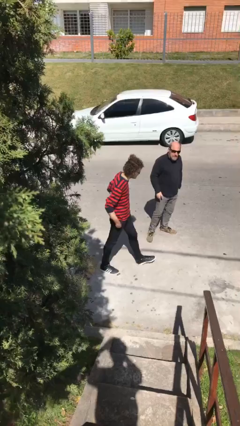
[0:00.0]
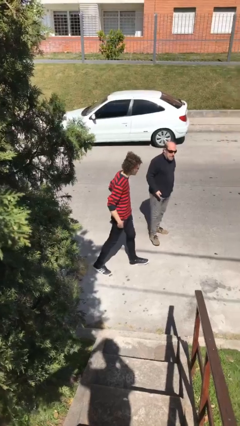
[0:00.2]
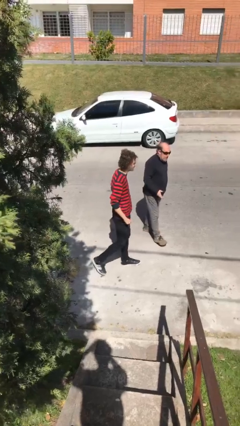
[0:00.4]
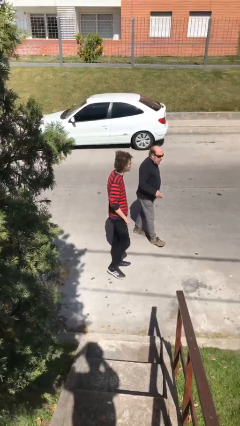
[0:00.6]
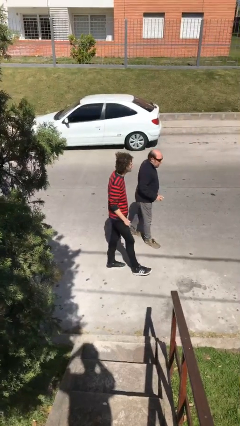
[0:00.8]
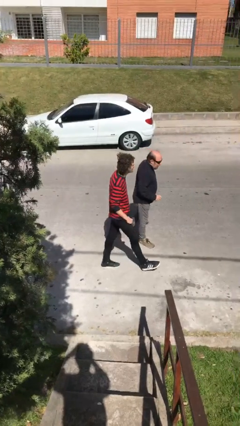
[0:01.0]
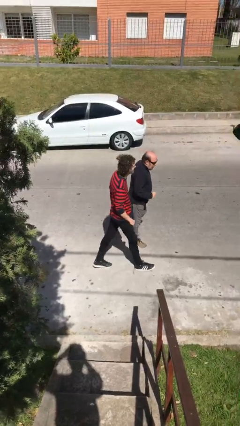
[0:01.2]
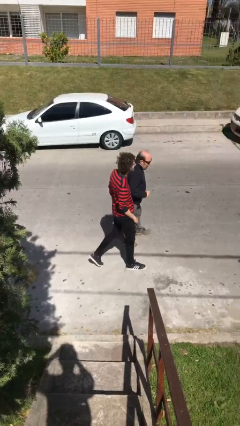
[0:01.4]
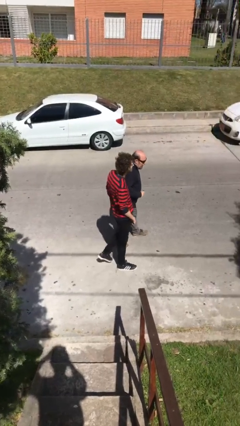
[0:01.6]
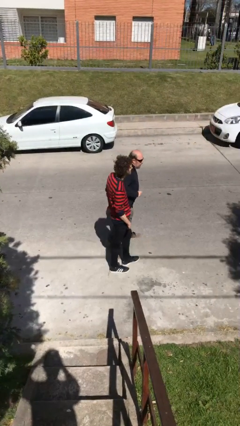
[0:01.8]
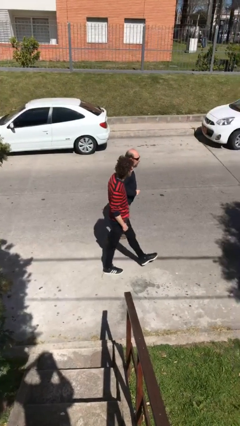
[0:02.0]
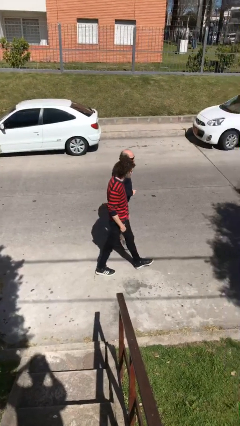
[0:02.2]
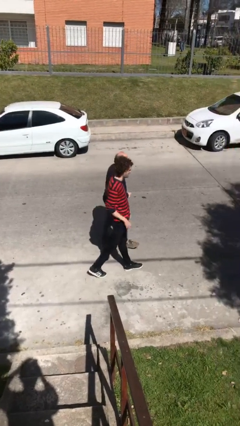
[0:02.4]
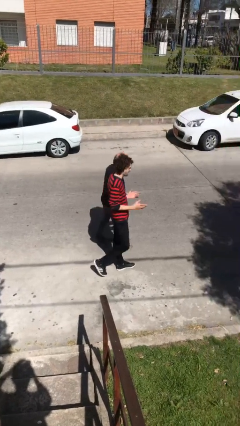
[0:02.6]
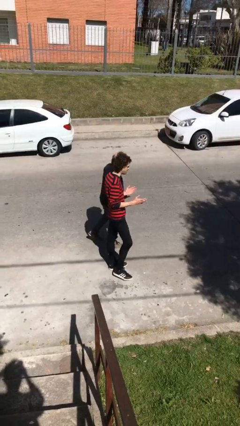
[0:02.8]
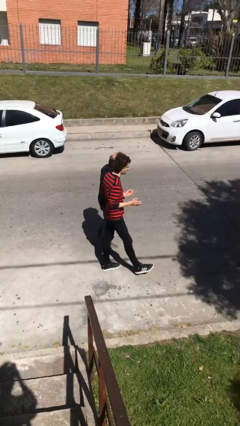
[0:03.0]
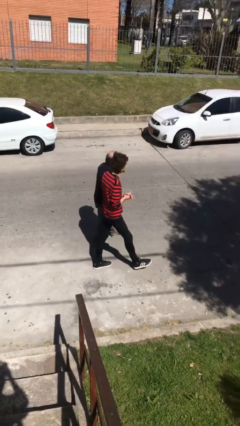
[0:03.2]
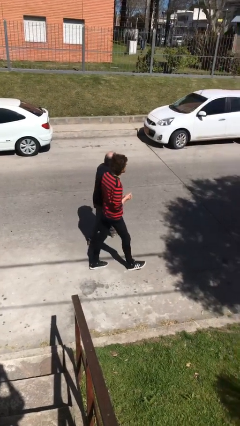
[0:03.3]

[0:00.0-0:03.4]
person talks to person

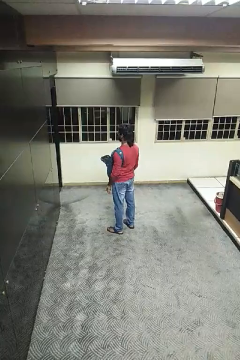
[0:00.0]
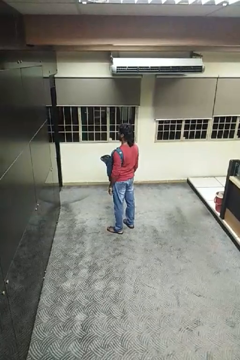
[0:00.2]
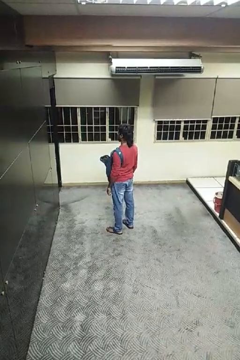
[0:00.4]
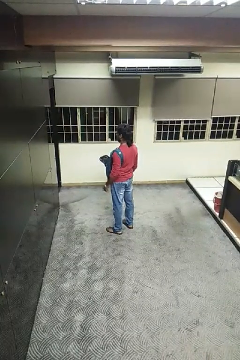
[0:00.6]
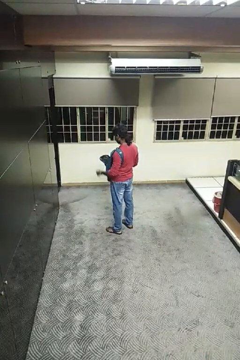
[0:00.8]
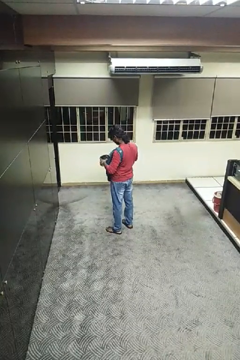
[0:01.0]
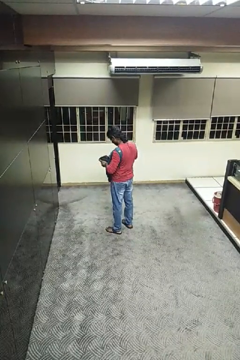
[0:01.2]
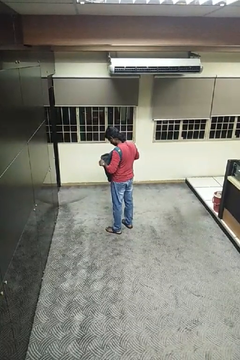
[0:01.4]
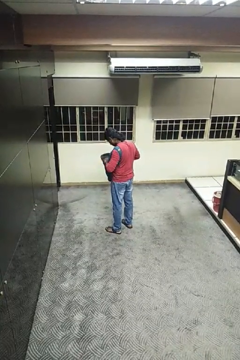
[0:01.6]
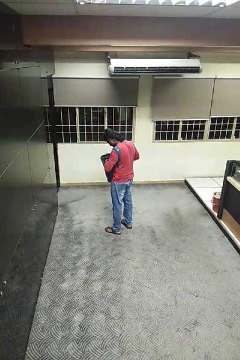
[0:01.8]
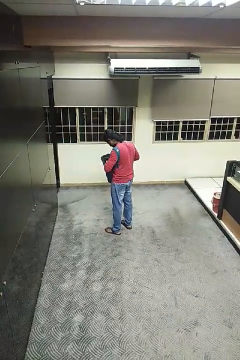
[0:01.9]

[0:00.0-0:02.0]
person searches in backpack

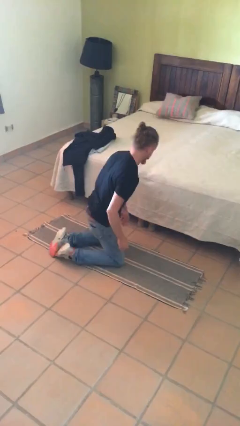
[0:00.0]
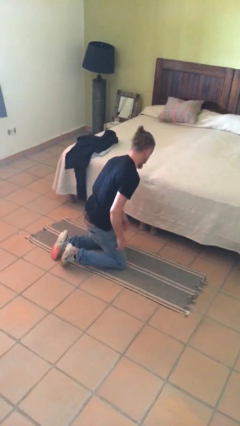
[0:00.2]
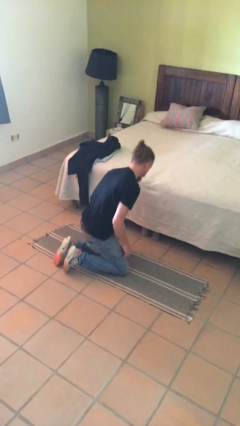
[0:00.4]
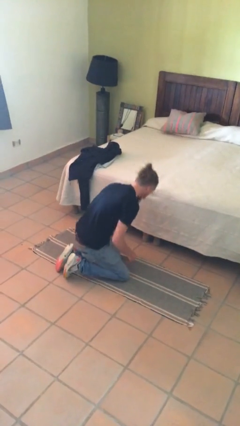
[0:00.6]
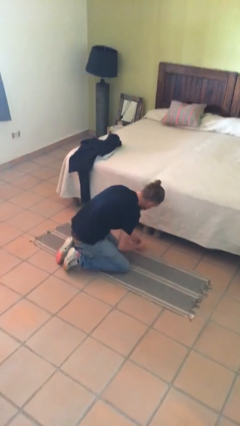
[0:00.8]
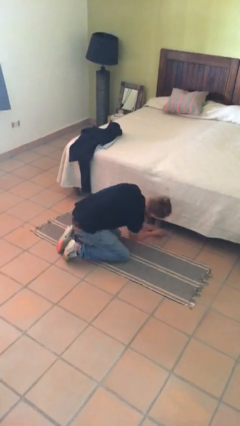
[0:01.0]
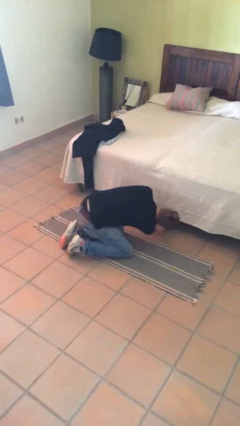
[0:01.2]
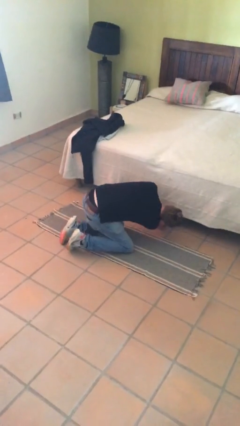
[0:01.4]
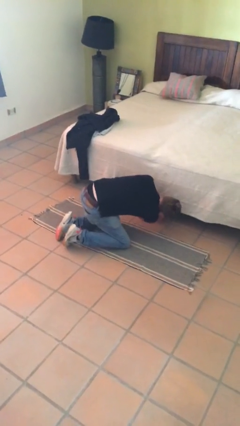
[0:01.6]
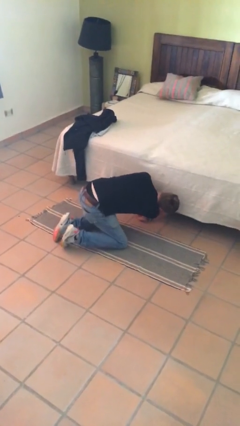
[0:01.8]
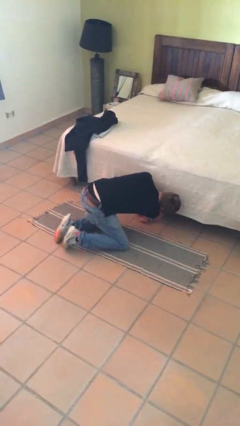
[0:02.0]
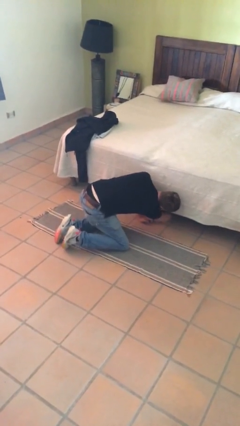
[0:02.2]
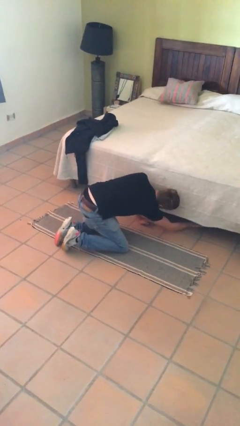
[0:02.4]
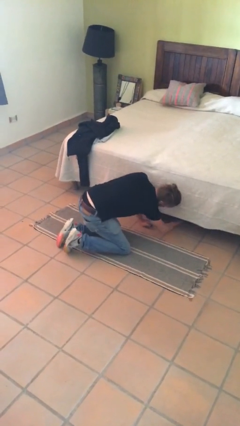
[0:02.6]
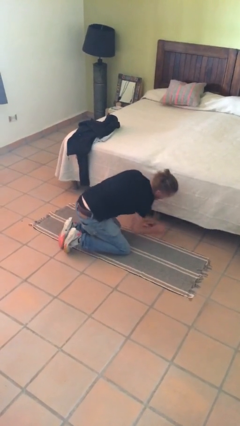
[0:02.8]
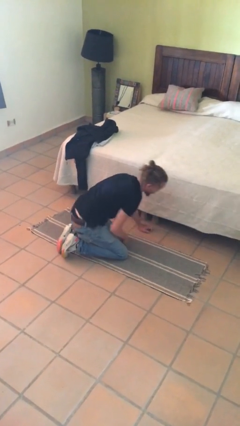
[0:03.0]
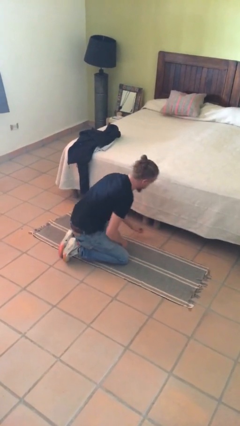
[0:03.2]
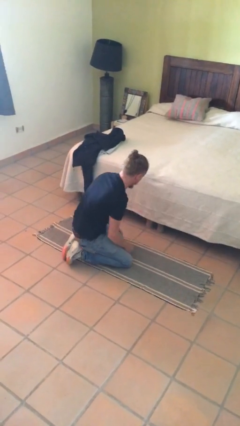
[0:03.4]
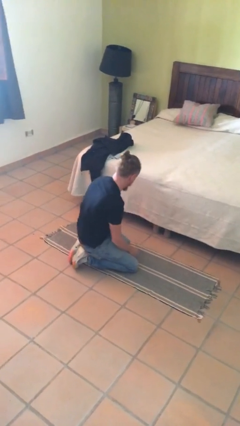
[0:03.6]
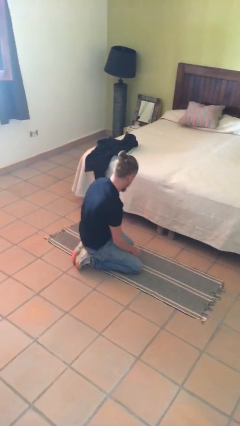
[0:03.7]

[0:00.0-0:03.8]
person searches under bed

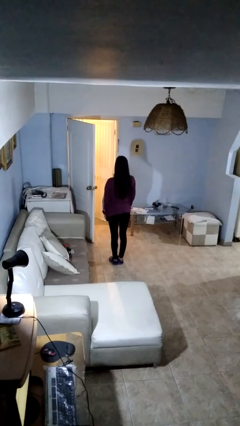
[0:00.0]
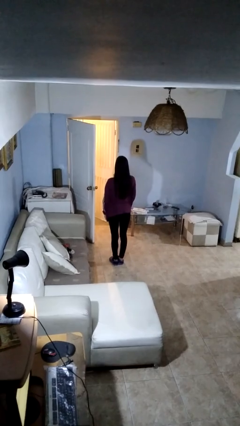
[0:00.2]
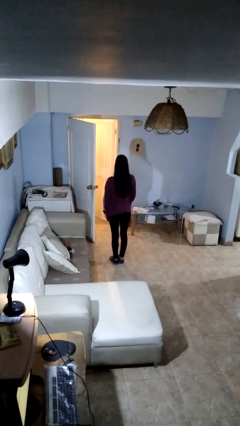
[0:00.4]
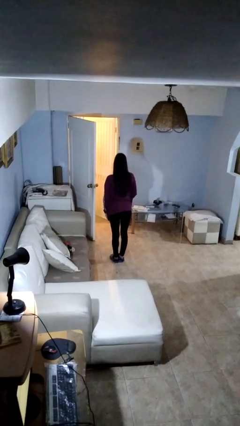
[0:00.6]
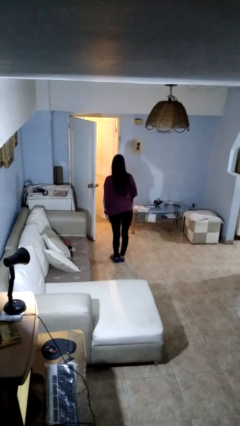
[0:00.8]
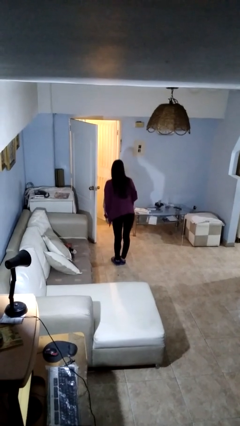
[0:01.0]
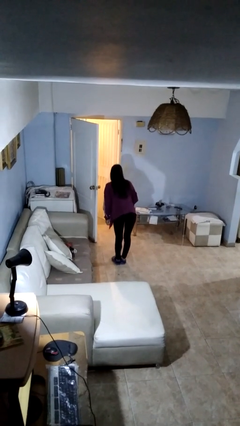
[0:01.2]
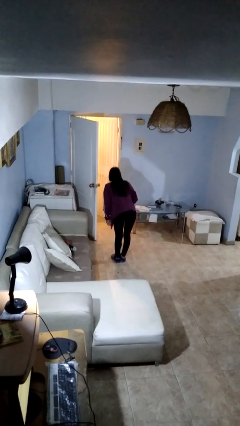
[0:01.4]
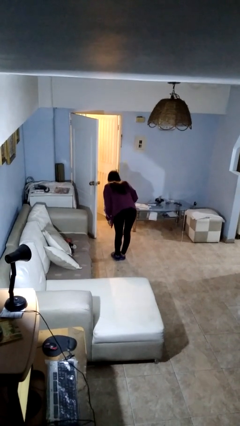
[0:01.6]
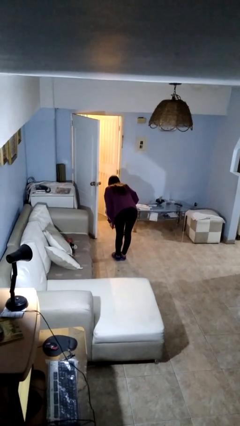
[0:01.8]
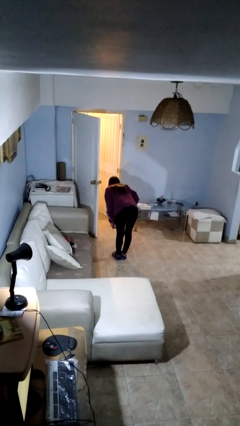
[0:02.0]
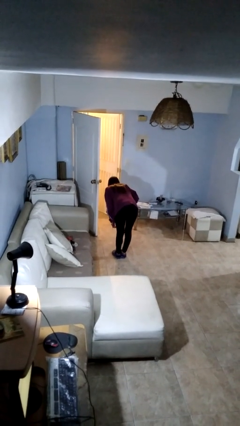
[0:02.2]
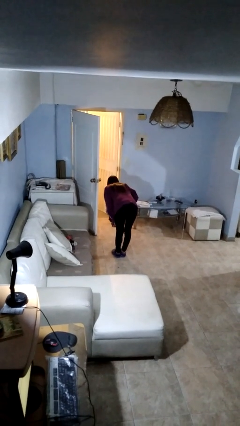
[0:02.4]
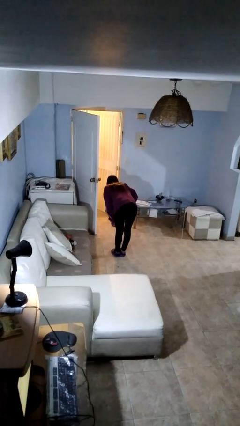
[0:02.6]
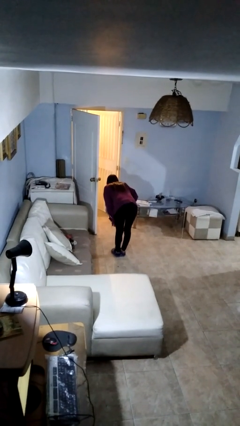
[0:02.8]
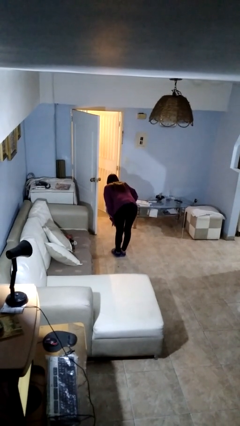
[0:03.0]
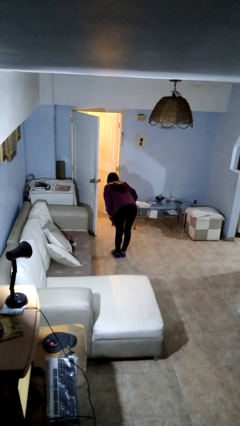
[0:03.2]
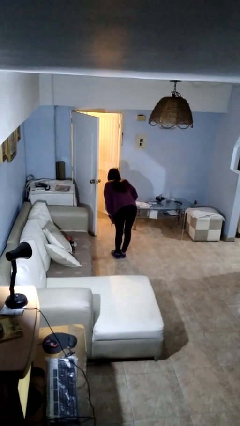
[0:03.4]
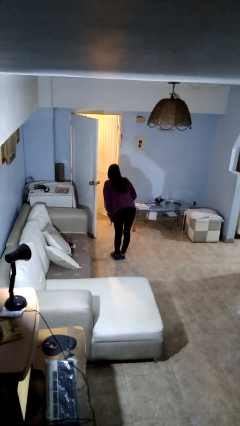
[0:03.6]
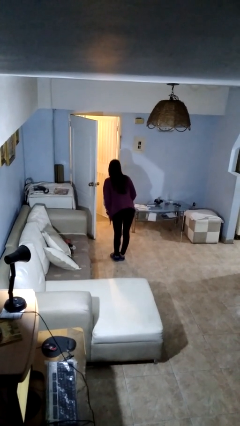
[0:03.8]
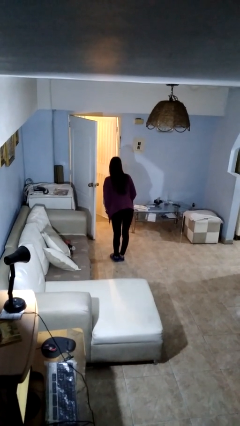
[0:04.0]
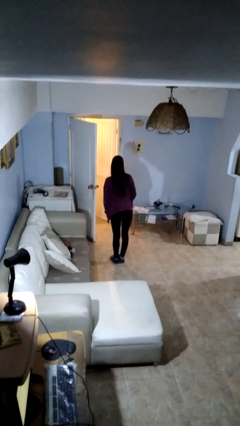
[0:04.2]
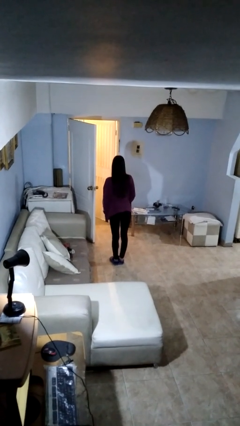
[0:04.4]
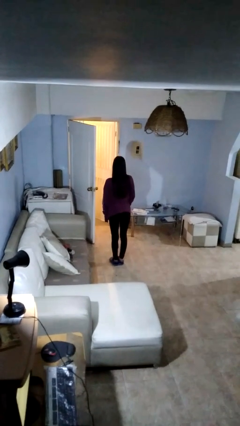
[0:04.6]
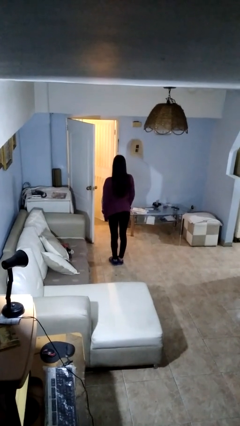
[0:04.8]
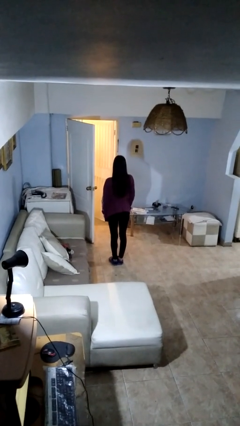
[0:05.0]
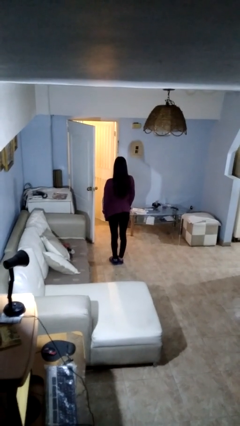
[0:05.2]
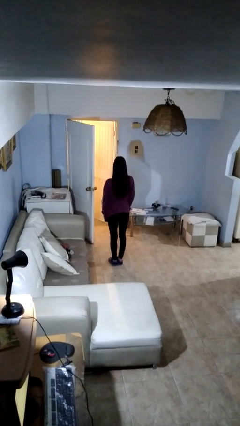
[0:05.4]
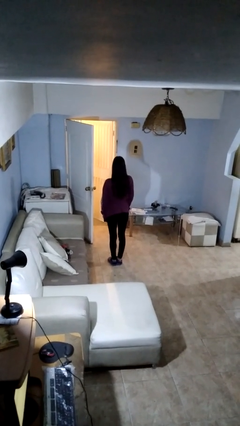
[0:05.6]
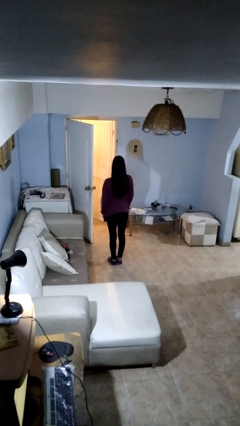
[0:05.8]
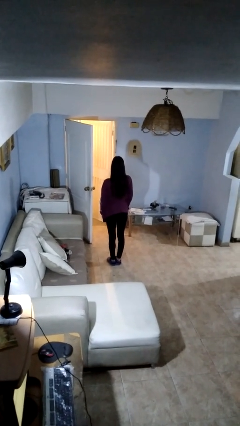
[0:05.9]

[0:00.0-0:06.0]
person bows

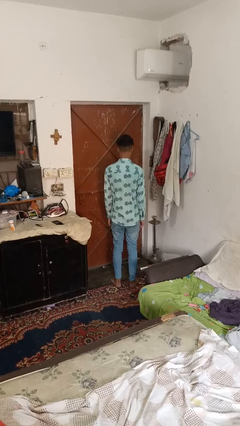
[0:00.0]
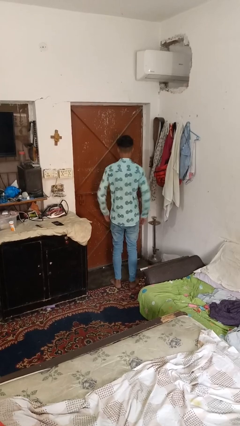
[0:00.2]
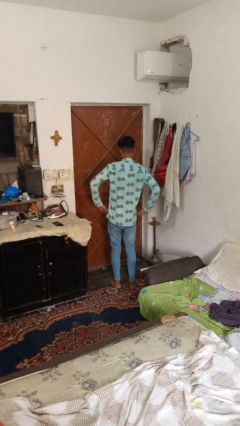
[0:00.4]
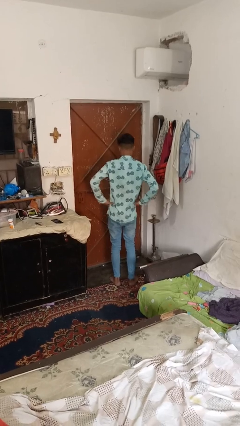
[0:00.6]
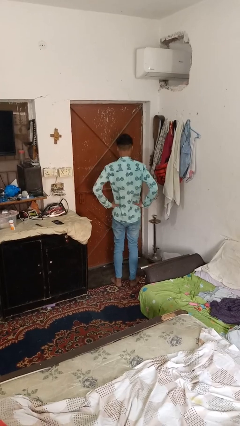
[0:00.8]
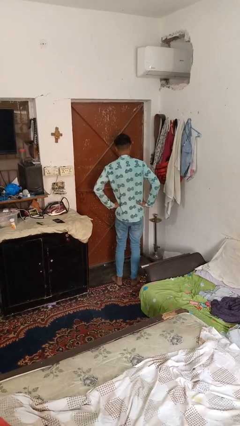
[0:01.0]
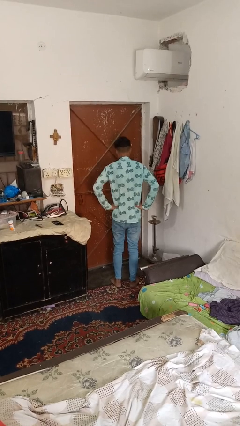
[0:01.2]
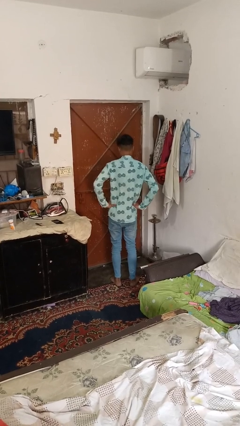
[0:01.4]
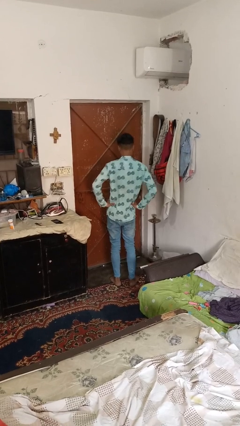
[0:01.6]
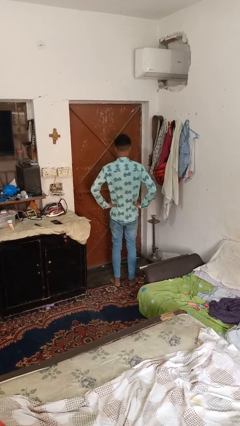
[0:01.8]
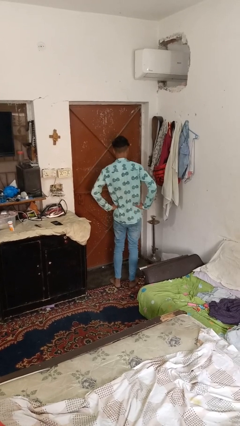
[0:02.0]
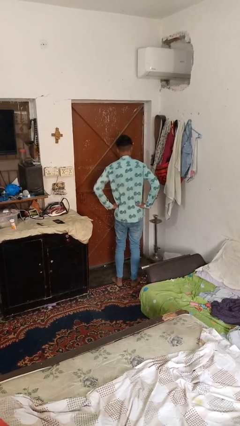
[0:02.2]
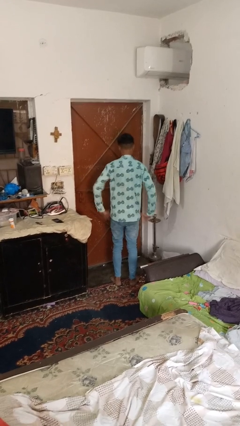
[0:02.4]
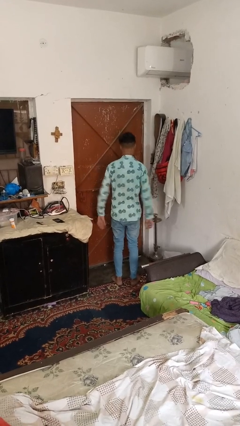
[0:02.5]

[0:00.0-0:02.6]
person wiggles hips

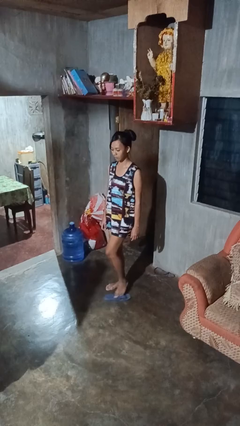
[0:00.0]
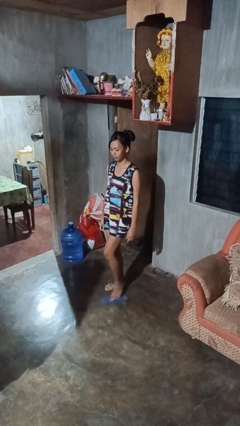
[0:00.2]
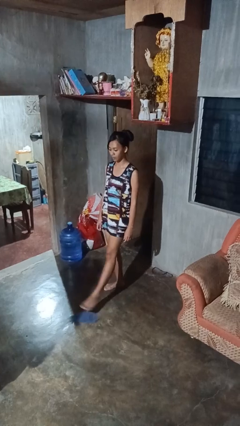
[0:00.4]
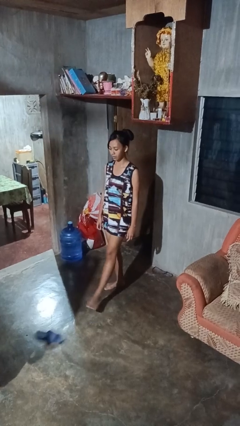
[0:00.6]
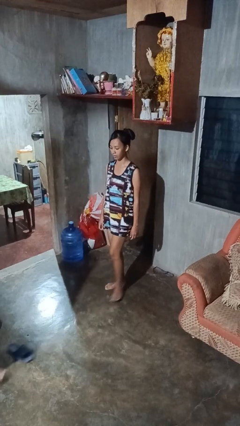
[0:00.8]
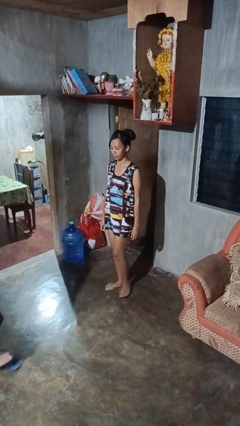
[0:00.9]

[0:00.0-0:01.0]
person kicks object to person
